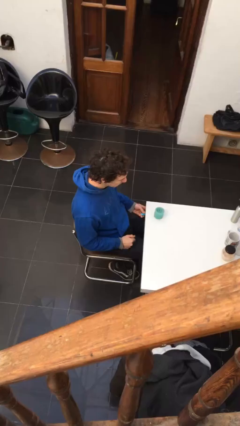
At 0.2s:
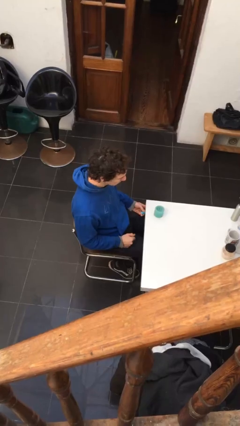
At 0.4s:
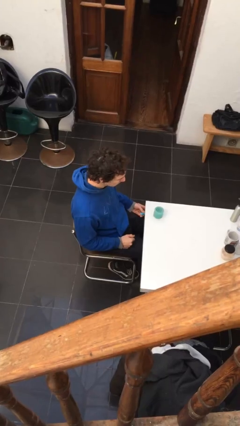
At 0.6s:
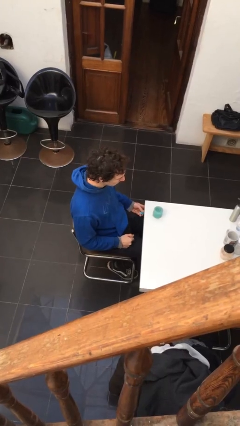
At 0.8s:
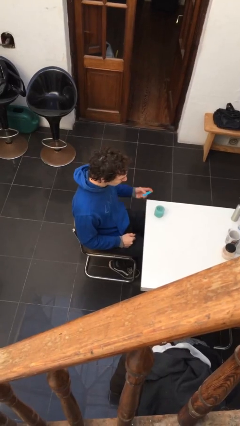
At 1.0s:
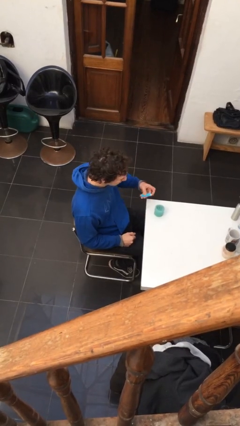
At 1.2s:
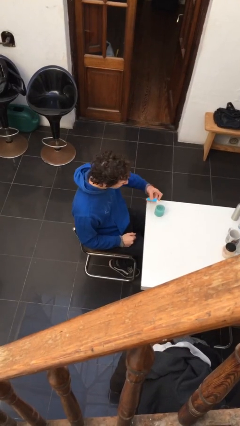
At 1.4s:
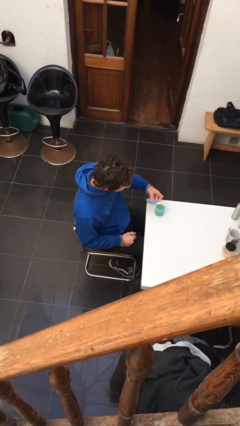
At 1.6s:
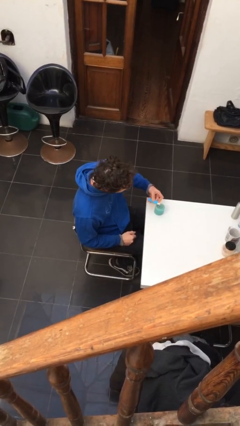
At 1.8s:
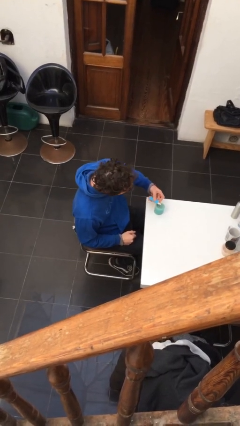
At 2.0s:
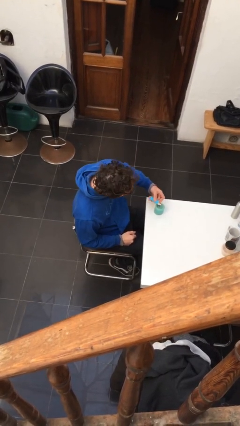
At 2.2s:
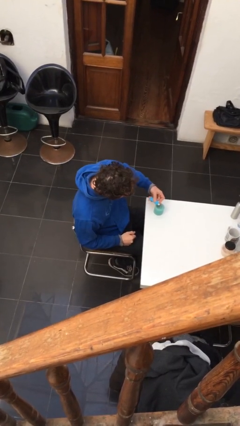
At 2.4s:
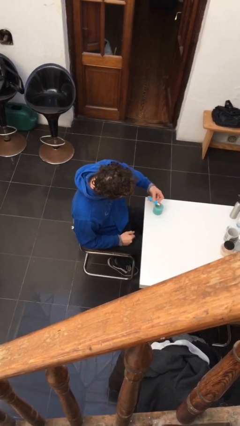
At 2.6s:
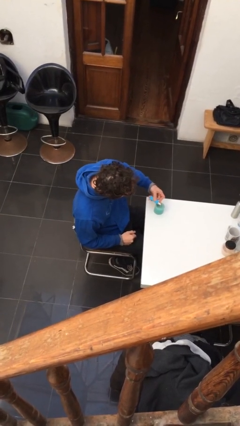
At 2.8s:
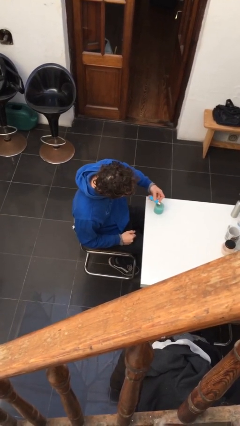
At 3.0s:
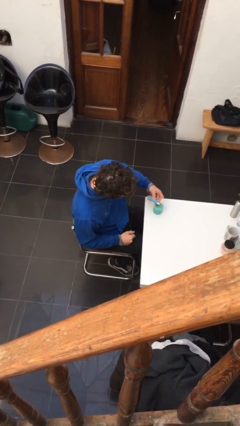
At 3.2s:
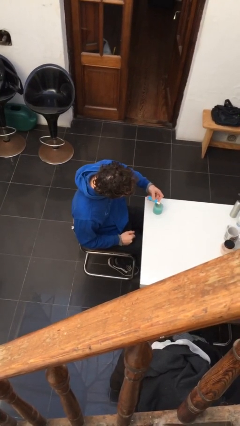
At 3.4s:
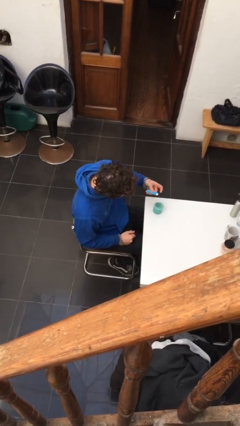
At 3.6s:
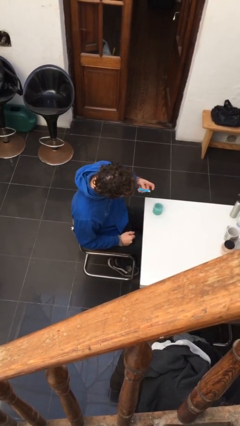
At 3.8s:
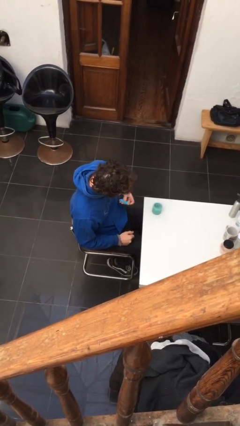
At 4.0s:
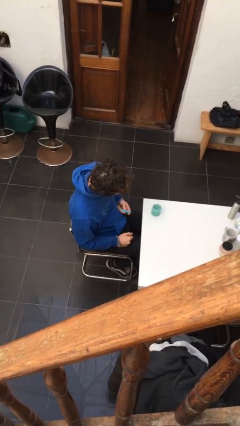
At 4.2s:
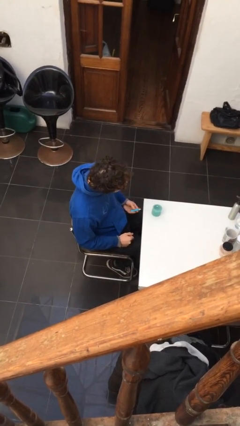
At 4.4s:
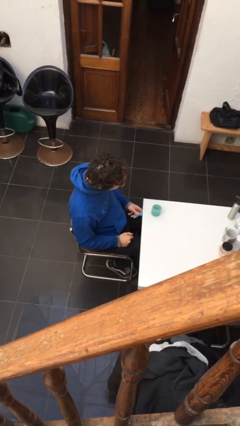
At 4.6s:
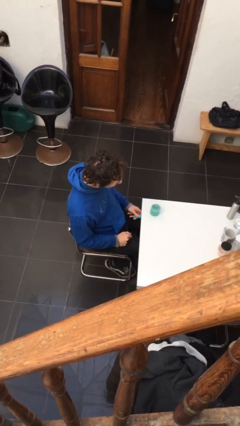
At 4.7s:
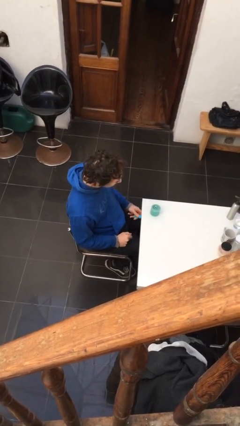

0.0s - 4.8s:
person lights candle

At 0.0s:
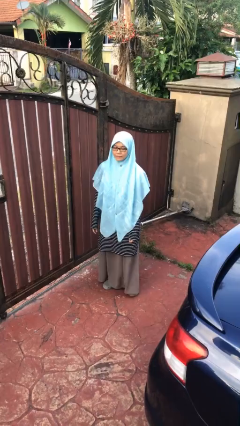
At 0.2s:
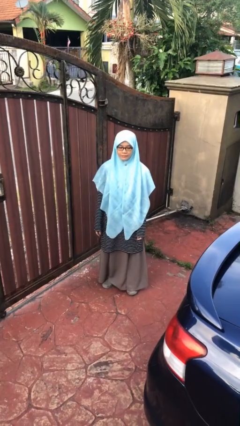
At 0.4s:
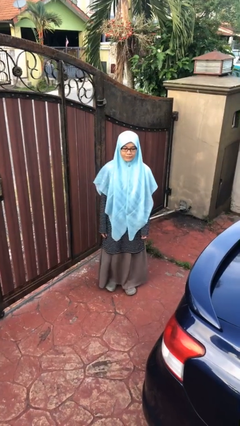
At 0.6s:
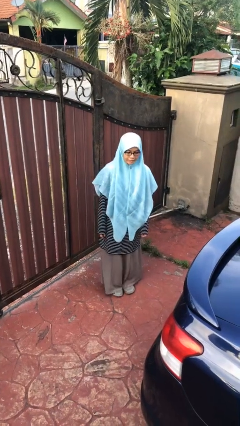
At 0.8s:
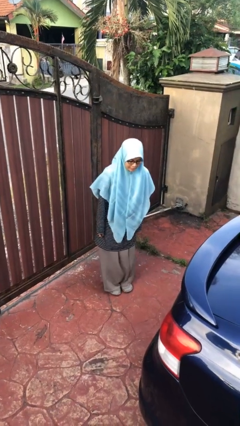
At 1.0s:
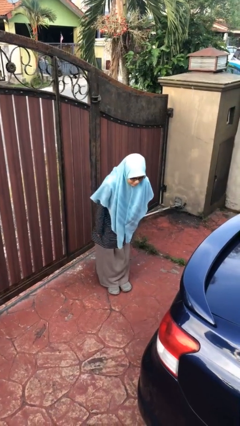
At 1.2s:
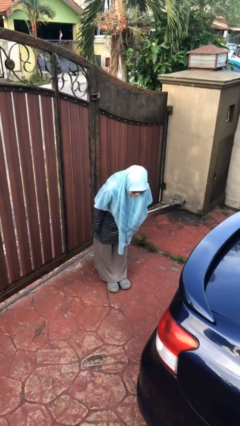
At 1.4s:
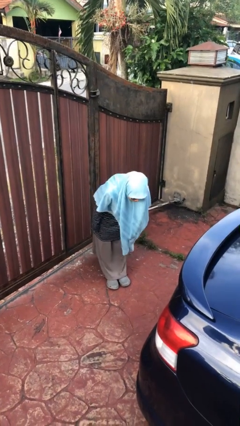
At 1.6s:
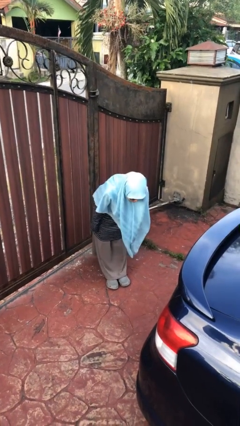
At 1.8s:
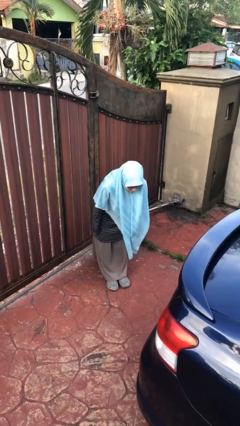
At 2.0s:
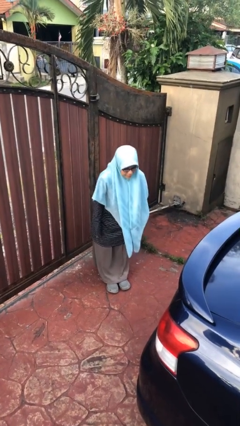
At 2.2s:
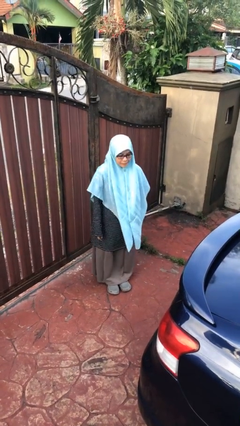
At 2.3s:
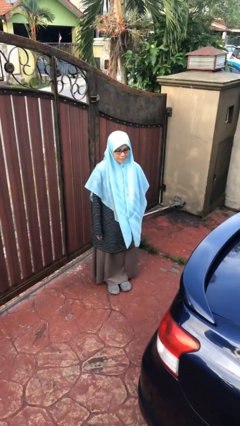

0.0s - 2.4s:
person bows

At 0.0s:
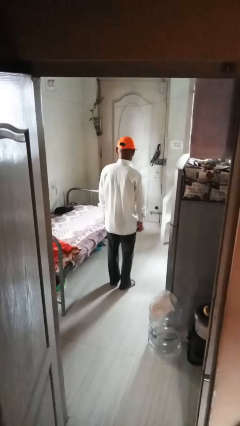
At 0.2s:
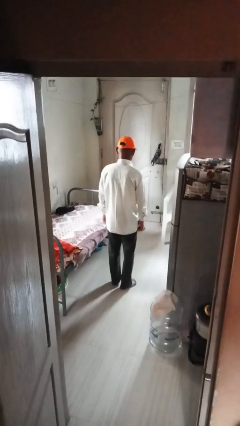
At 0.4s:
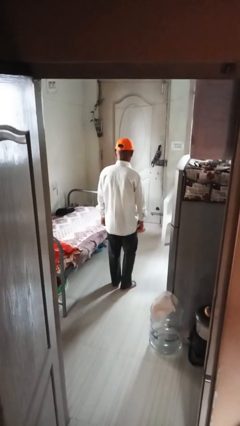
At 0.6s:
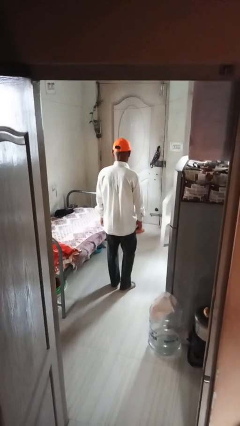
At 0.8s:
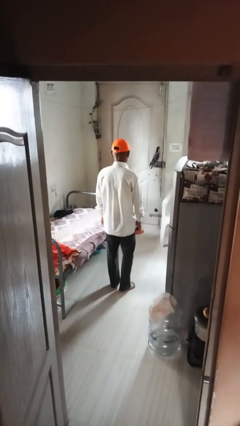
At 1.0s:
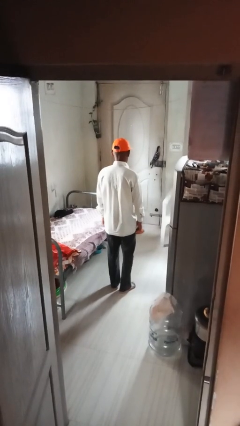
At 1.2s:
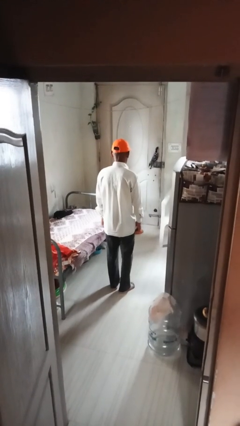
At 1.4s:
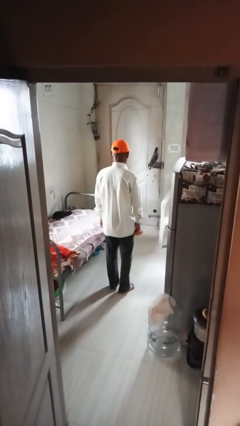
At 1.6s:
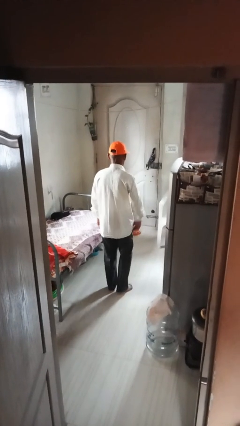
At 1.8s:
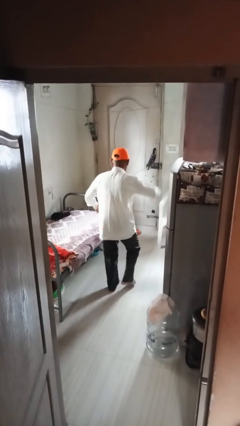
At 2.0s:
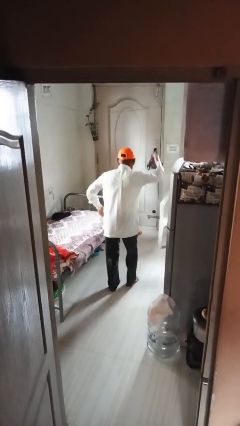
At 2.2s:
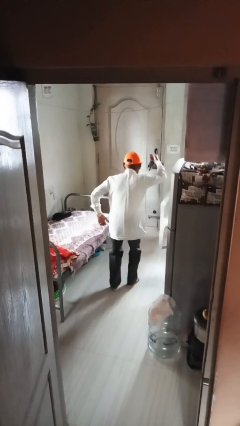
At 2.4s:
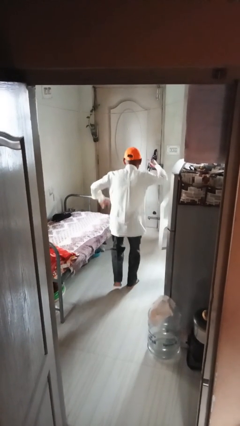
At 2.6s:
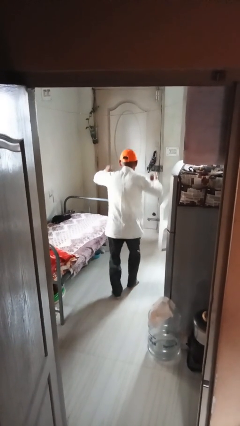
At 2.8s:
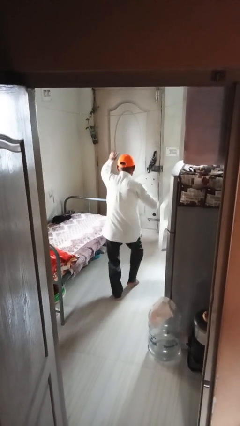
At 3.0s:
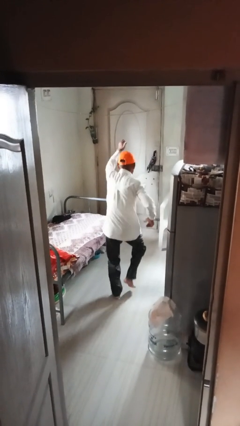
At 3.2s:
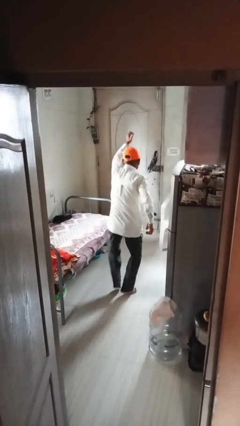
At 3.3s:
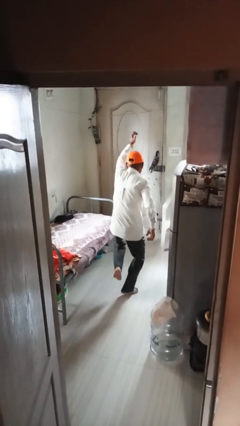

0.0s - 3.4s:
person dances in place

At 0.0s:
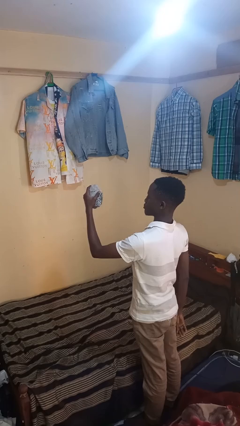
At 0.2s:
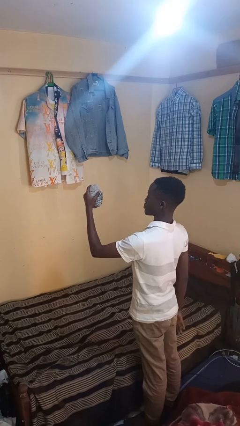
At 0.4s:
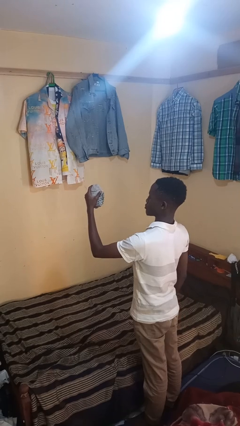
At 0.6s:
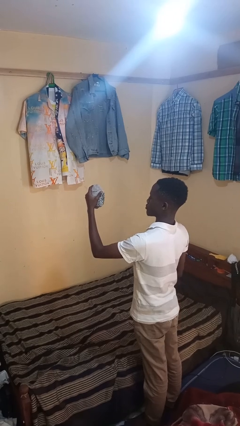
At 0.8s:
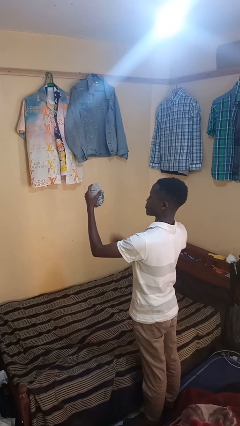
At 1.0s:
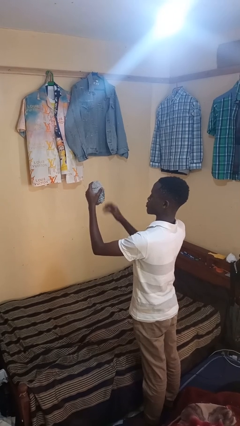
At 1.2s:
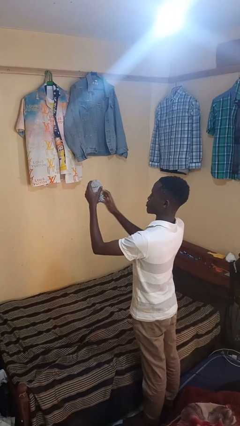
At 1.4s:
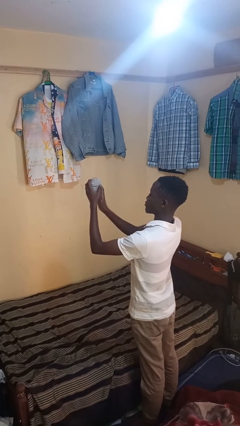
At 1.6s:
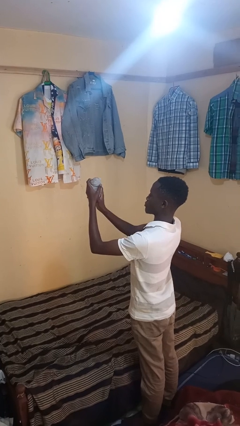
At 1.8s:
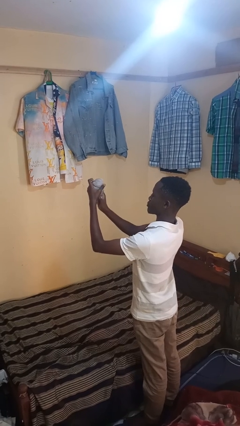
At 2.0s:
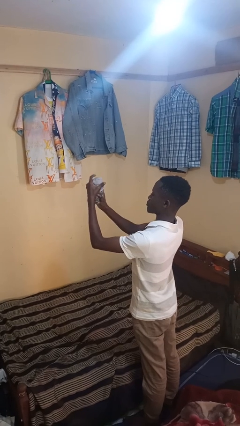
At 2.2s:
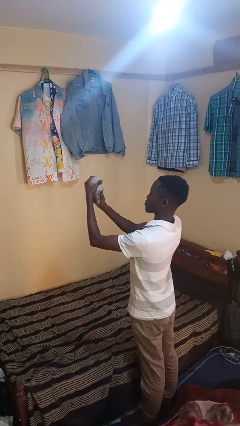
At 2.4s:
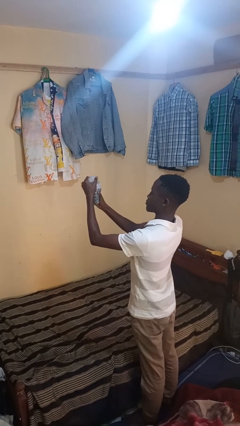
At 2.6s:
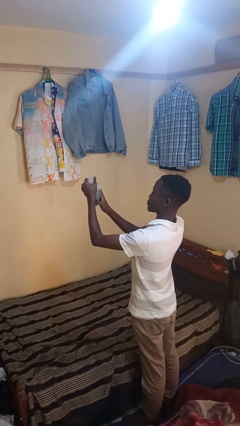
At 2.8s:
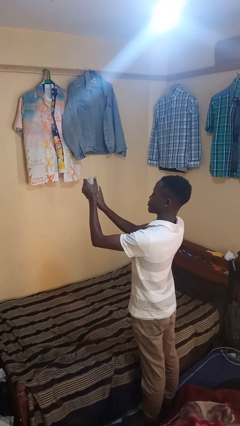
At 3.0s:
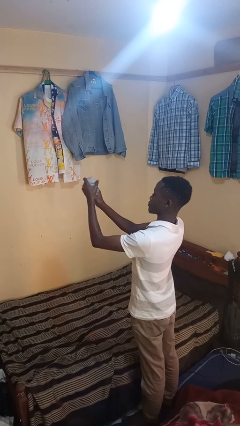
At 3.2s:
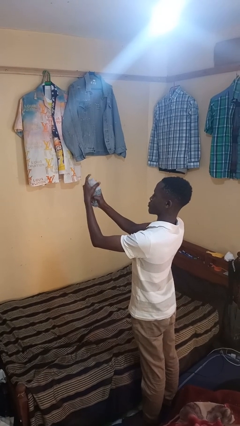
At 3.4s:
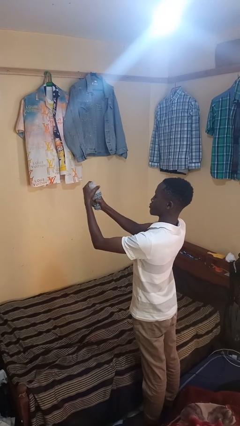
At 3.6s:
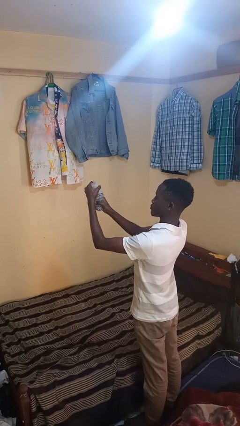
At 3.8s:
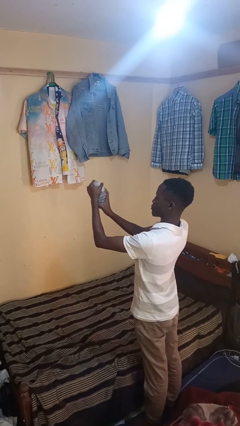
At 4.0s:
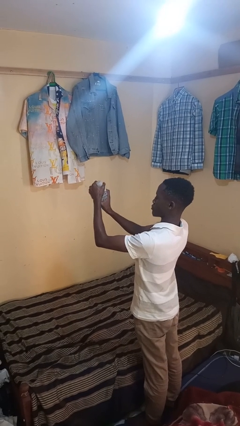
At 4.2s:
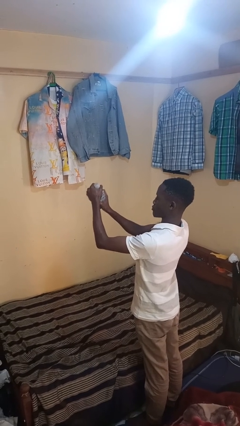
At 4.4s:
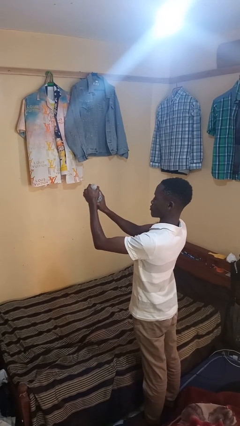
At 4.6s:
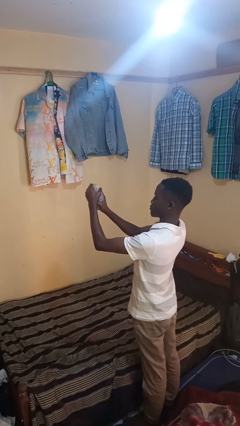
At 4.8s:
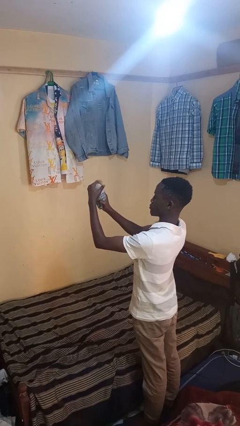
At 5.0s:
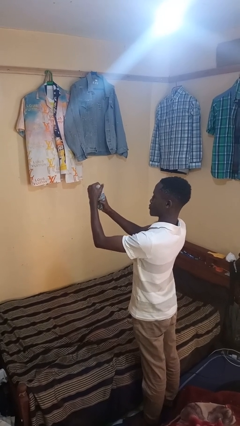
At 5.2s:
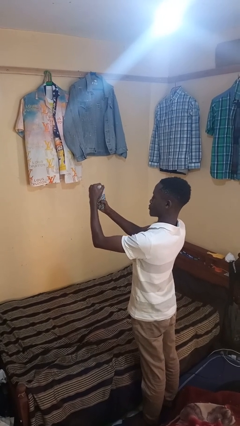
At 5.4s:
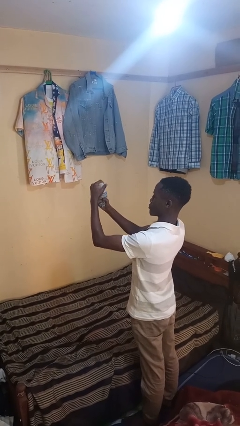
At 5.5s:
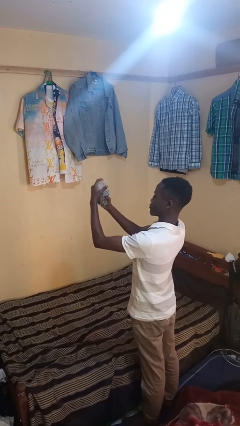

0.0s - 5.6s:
person squeezes object

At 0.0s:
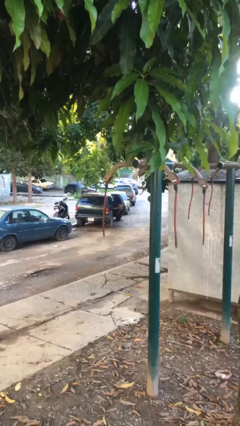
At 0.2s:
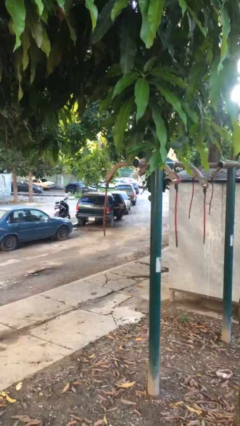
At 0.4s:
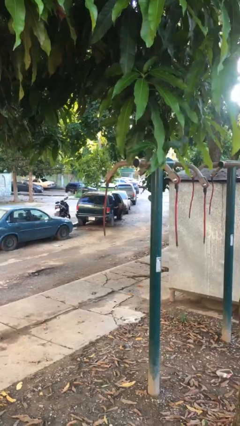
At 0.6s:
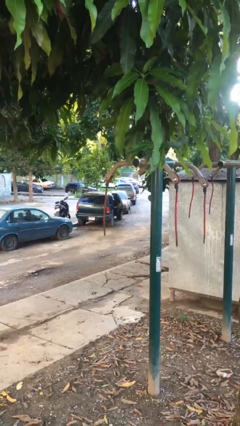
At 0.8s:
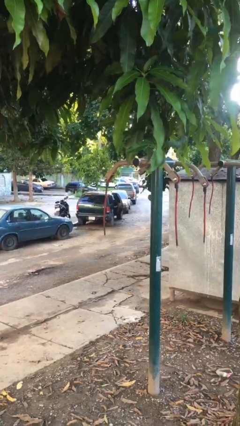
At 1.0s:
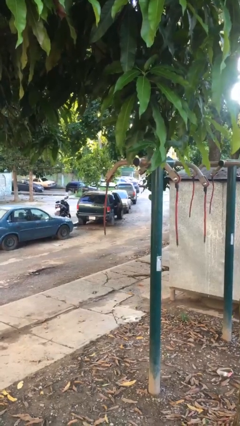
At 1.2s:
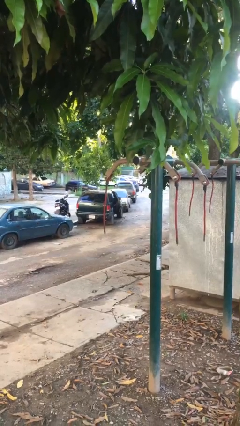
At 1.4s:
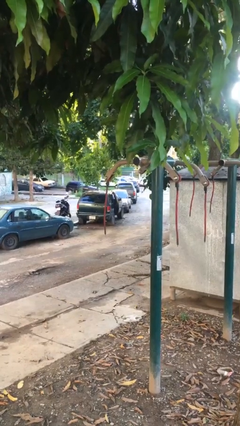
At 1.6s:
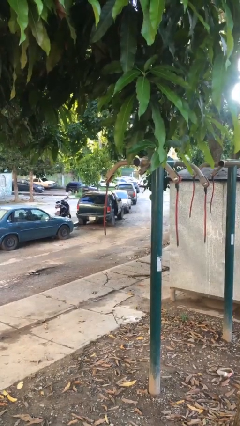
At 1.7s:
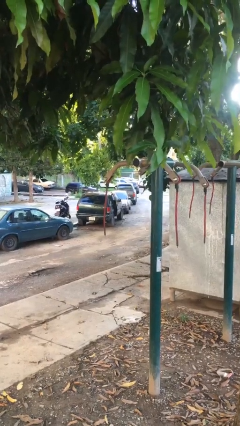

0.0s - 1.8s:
person closes car door
